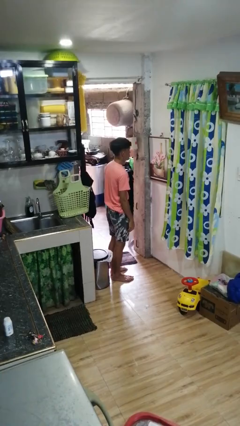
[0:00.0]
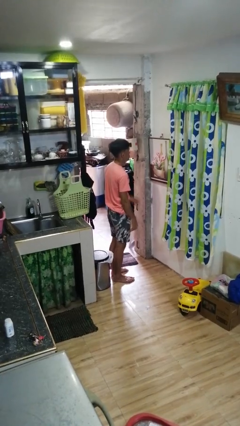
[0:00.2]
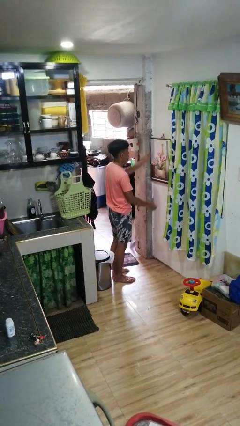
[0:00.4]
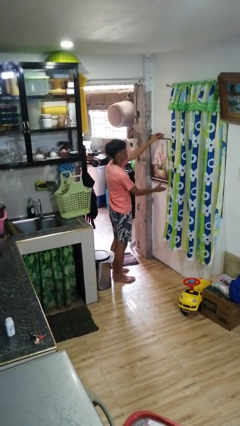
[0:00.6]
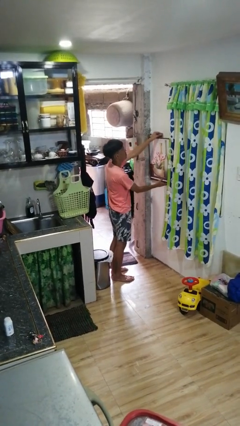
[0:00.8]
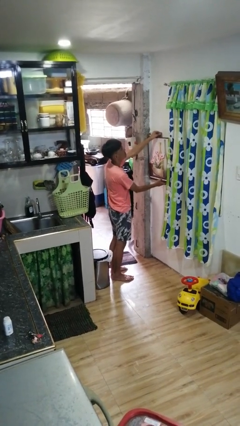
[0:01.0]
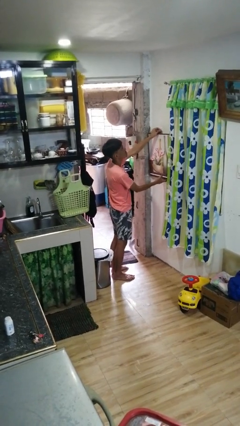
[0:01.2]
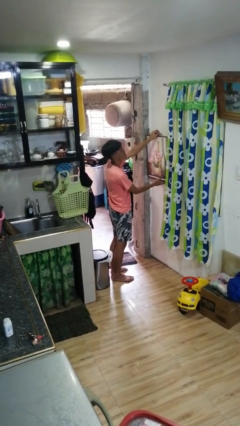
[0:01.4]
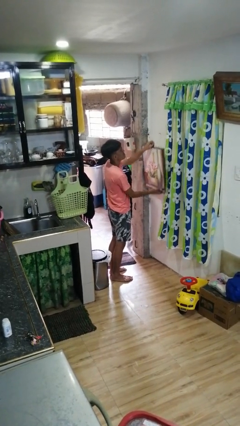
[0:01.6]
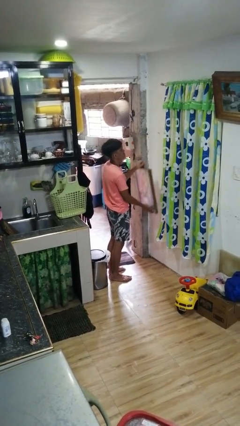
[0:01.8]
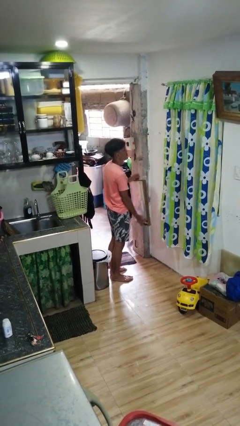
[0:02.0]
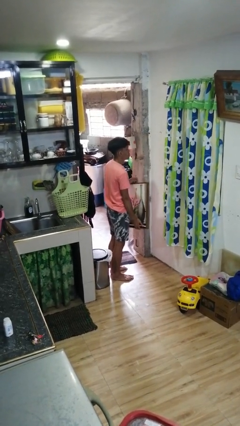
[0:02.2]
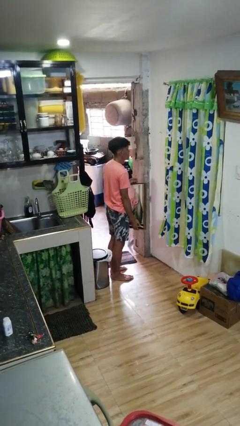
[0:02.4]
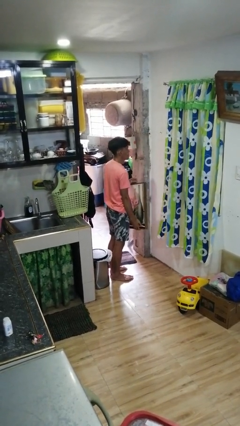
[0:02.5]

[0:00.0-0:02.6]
person takes down picture frame

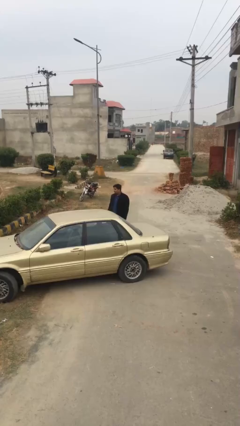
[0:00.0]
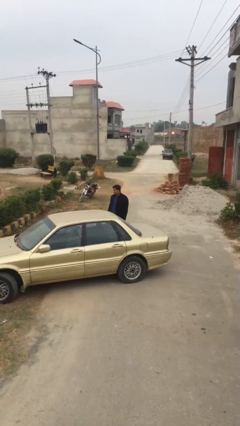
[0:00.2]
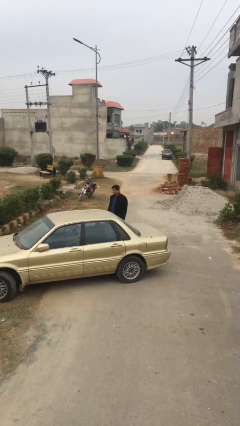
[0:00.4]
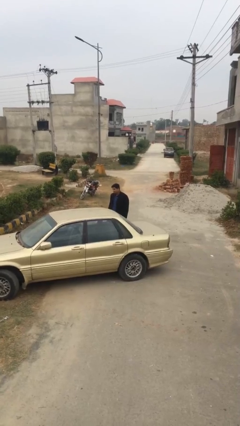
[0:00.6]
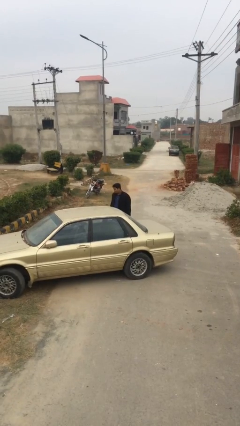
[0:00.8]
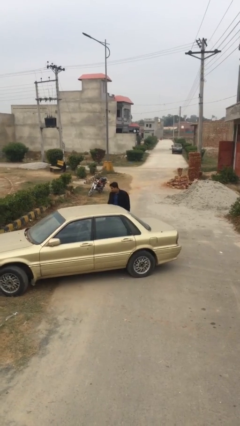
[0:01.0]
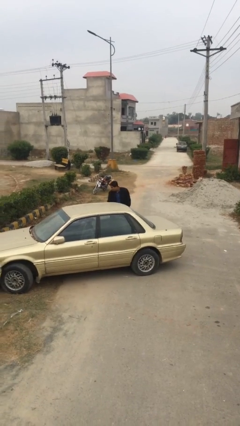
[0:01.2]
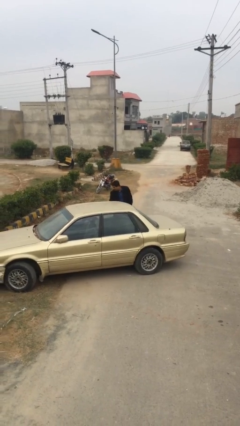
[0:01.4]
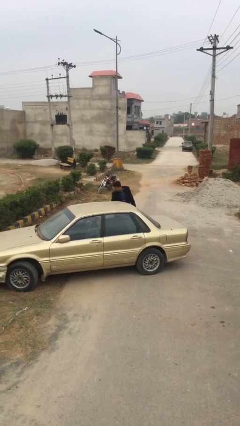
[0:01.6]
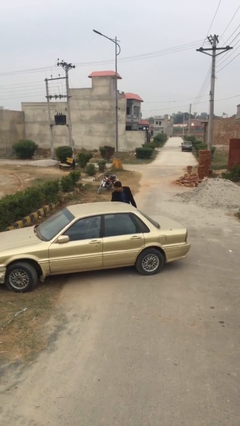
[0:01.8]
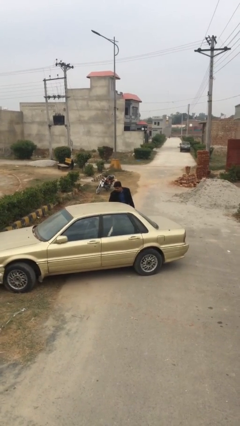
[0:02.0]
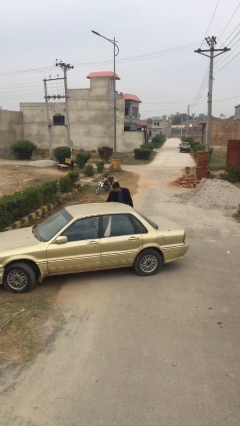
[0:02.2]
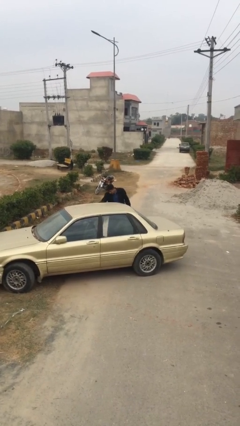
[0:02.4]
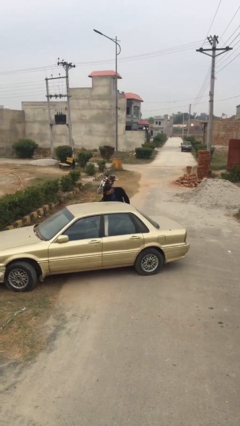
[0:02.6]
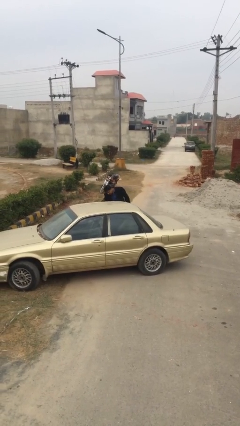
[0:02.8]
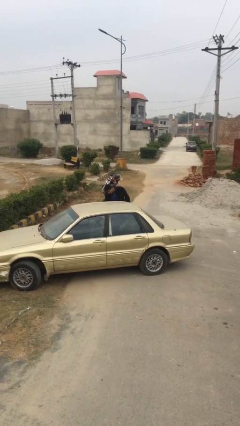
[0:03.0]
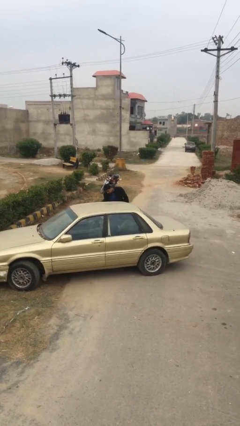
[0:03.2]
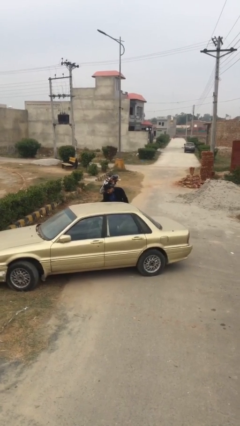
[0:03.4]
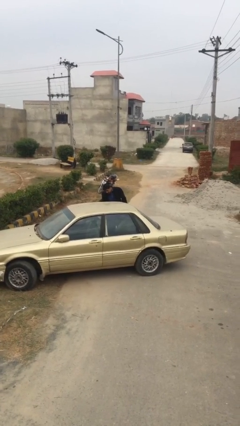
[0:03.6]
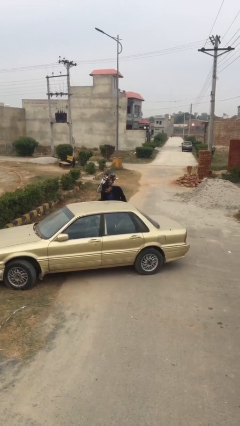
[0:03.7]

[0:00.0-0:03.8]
person opens car door

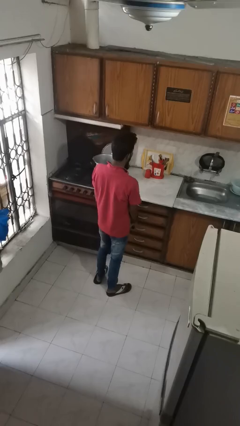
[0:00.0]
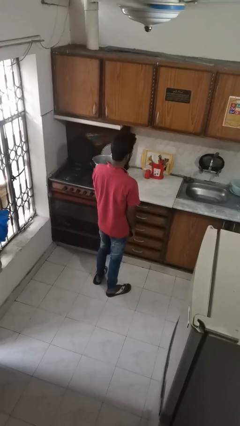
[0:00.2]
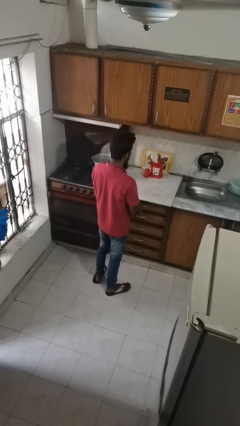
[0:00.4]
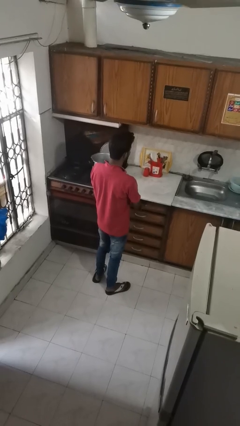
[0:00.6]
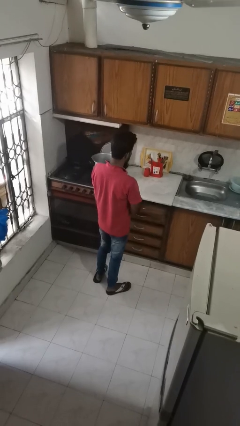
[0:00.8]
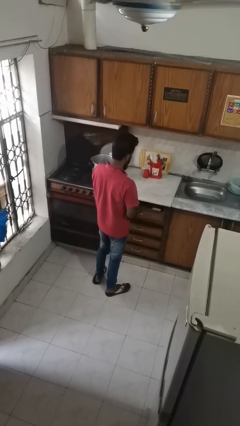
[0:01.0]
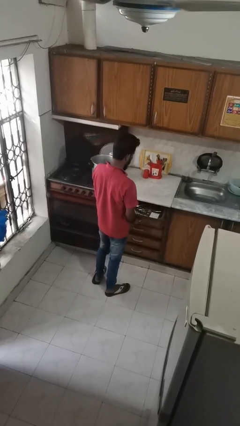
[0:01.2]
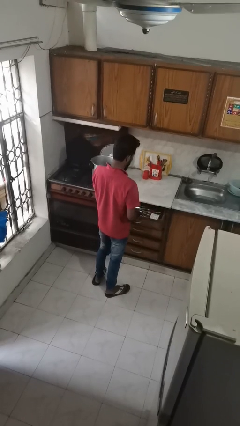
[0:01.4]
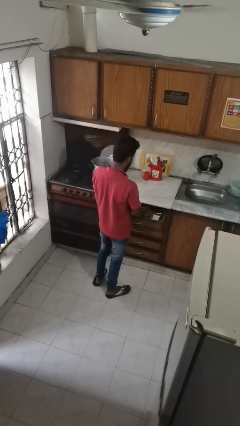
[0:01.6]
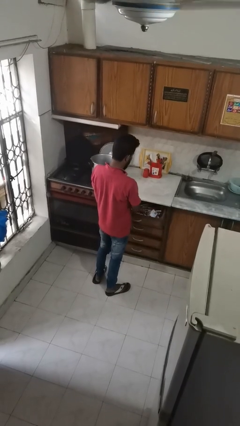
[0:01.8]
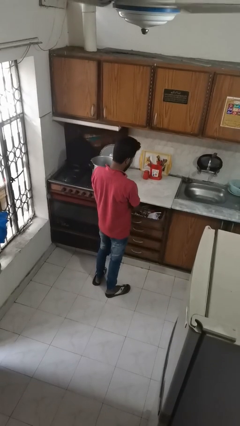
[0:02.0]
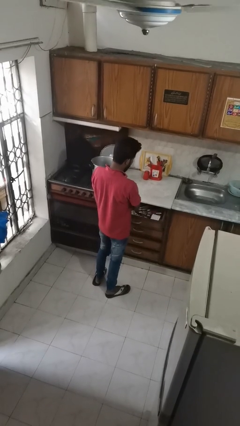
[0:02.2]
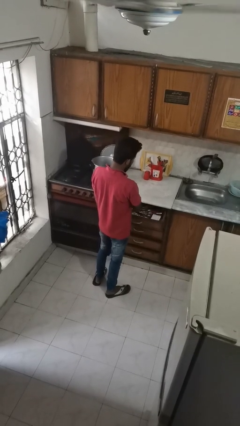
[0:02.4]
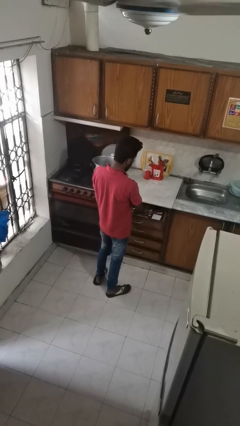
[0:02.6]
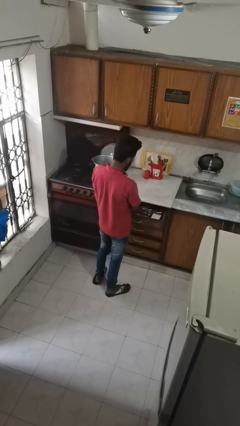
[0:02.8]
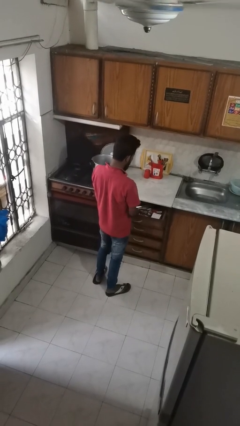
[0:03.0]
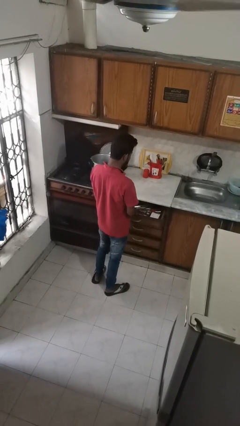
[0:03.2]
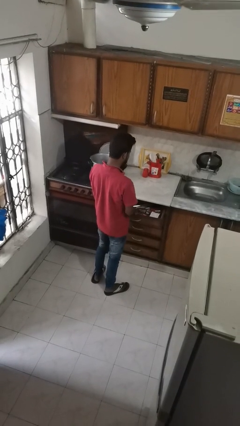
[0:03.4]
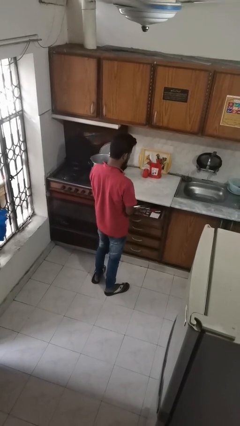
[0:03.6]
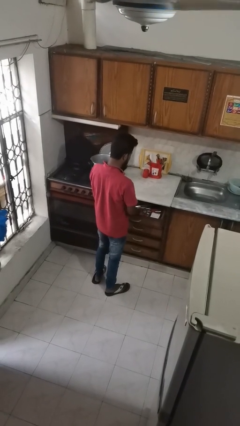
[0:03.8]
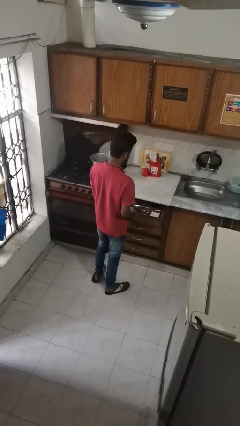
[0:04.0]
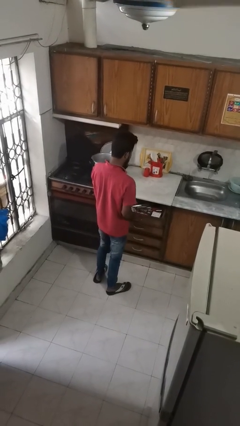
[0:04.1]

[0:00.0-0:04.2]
person searches in kitchen drawer

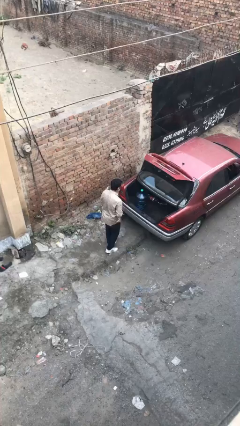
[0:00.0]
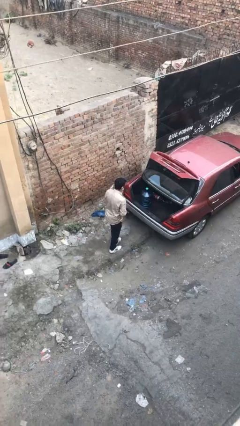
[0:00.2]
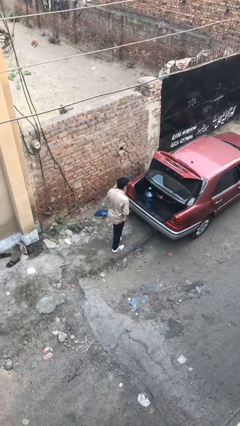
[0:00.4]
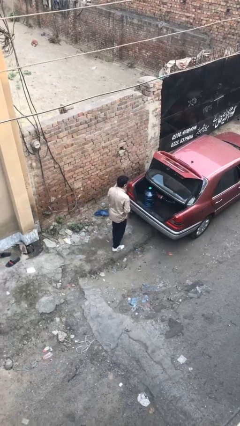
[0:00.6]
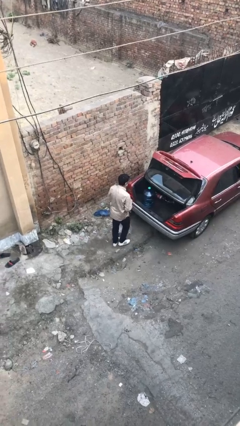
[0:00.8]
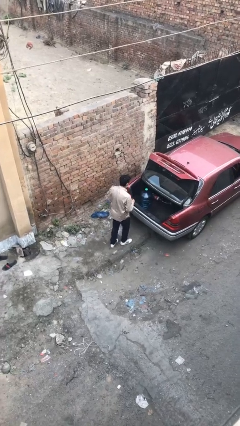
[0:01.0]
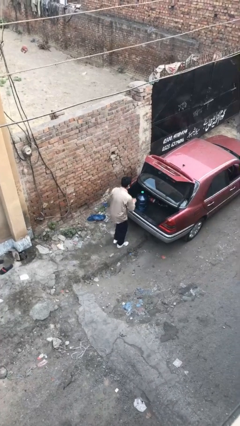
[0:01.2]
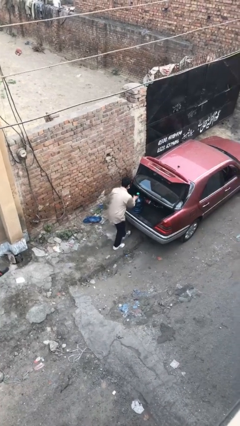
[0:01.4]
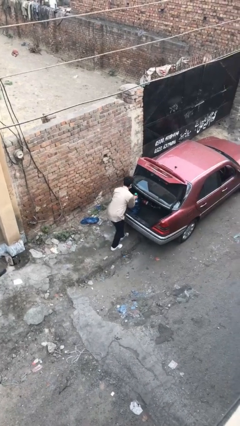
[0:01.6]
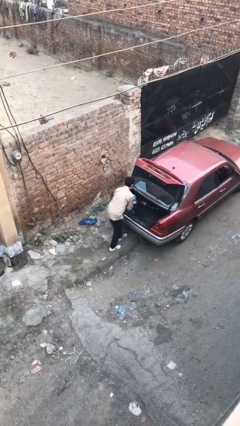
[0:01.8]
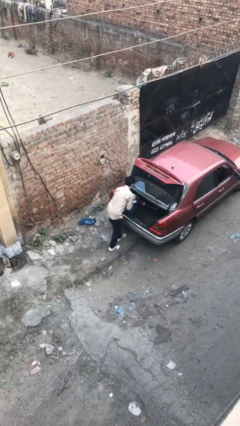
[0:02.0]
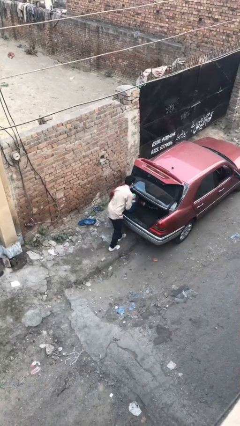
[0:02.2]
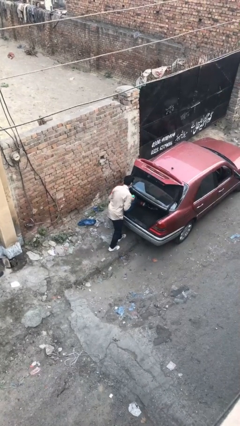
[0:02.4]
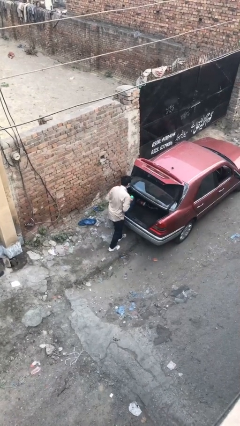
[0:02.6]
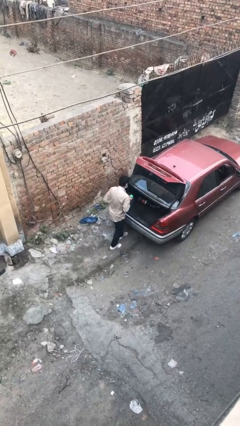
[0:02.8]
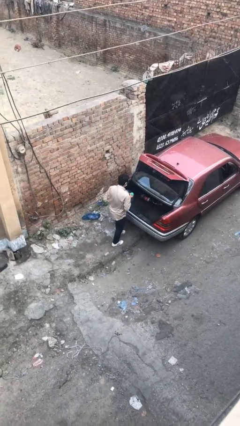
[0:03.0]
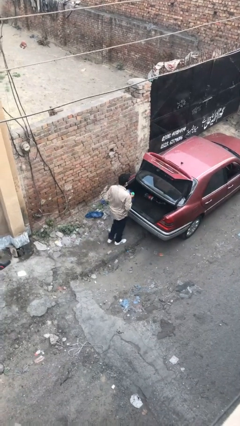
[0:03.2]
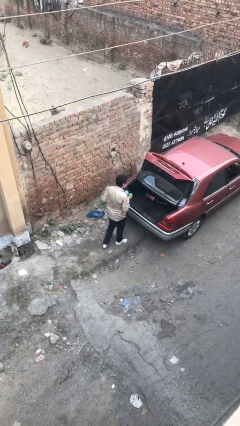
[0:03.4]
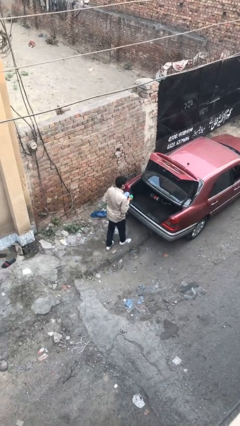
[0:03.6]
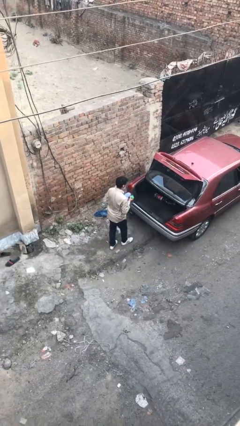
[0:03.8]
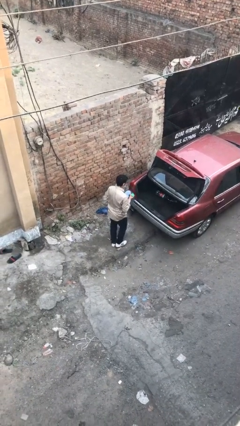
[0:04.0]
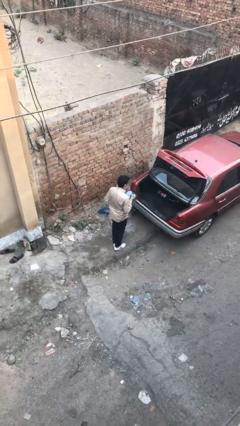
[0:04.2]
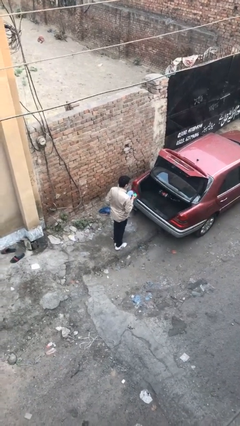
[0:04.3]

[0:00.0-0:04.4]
person unloads car

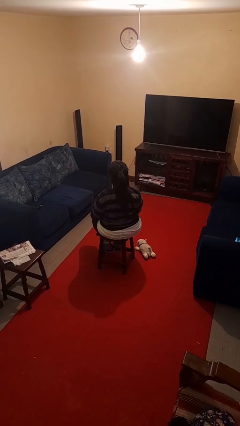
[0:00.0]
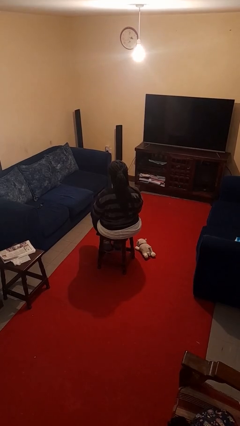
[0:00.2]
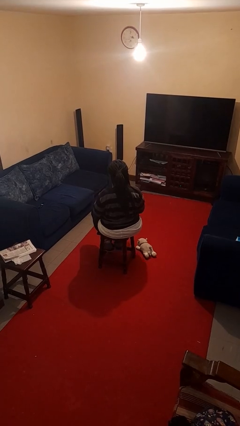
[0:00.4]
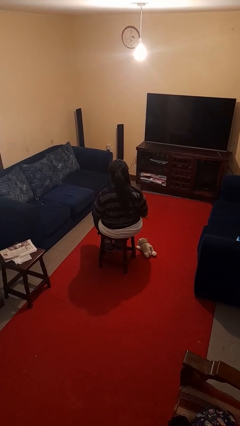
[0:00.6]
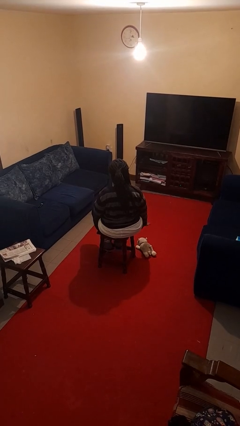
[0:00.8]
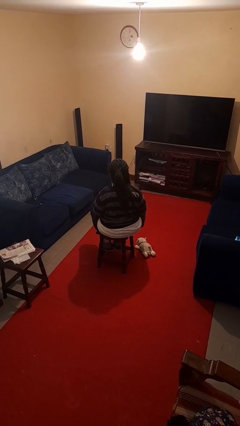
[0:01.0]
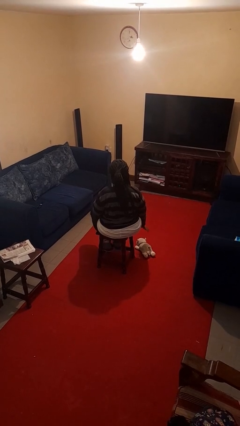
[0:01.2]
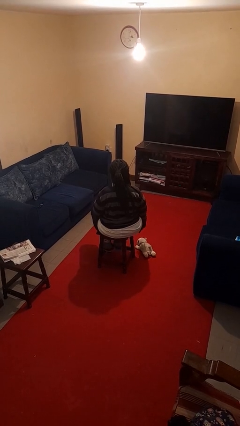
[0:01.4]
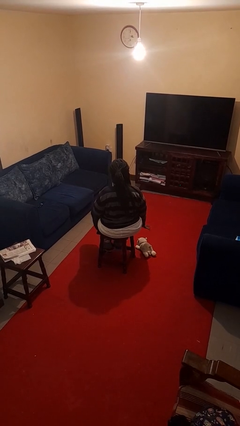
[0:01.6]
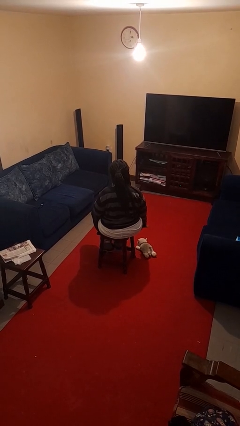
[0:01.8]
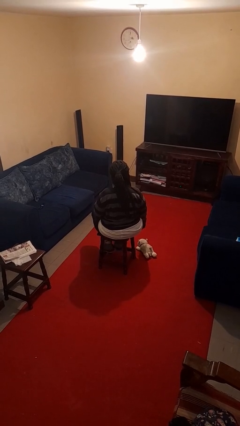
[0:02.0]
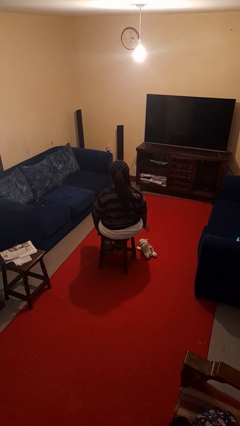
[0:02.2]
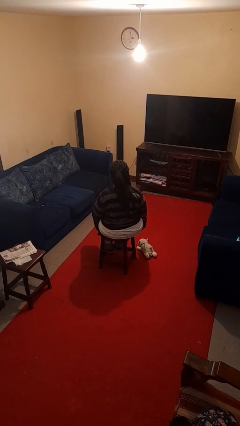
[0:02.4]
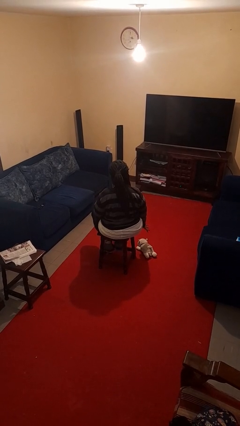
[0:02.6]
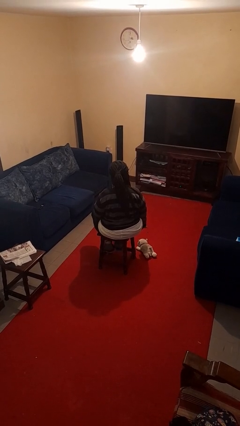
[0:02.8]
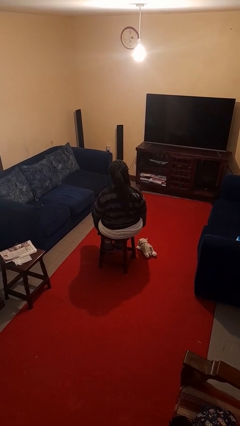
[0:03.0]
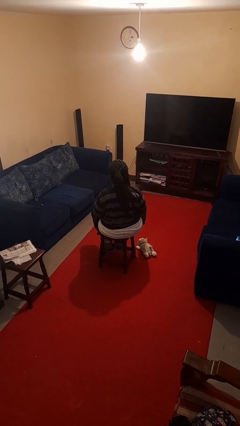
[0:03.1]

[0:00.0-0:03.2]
person waves hand over object
